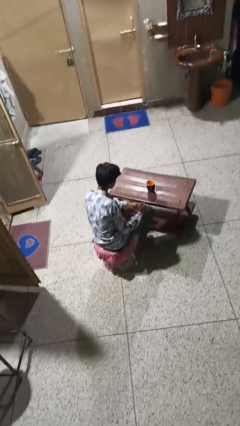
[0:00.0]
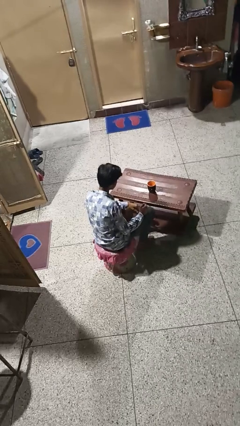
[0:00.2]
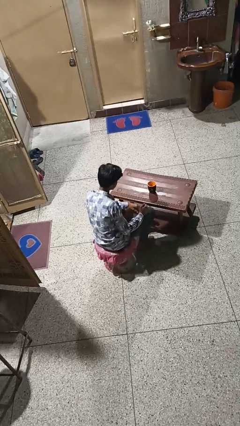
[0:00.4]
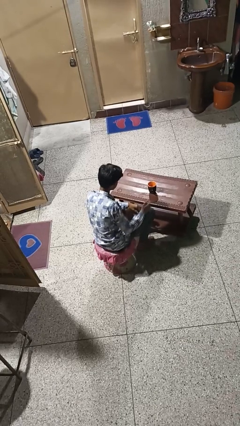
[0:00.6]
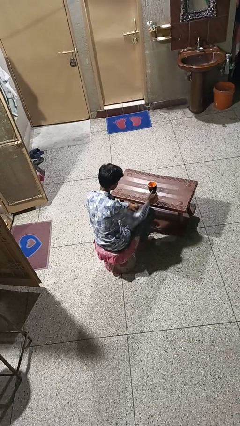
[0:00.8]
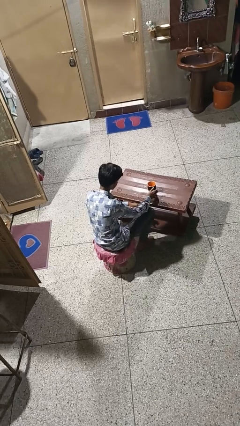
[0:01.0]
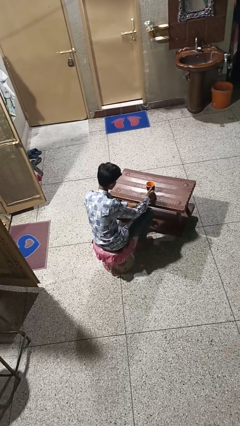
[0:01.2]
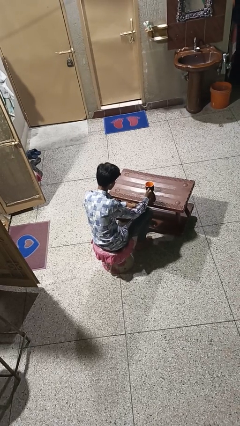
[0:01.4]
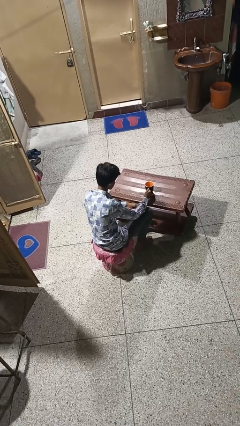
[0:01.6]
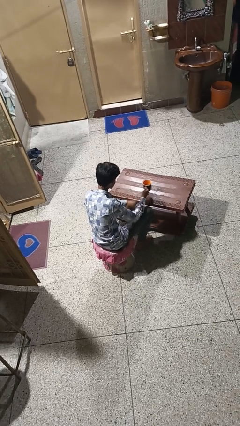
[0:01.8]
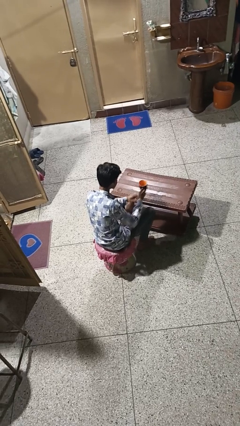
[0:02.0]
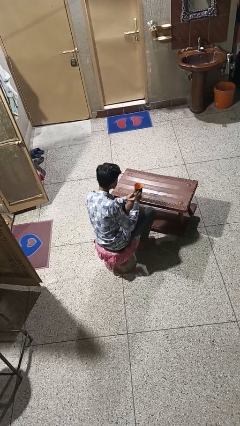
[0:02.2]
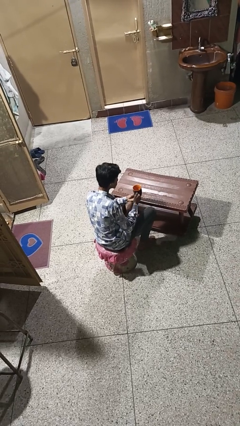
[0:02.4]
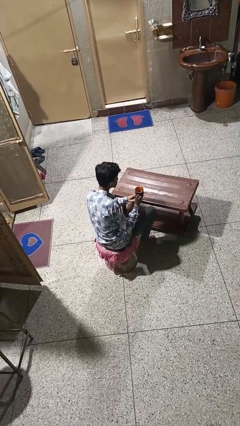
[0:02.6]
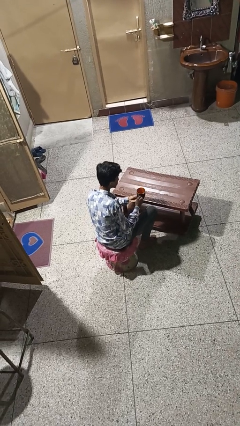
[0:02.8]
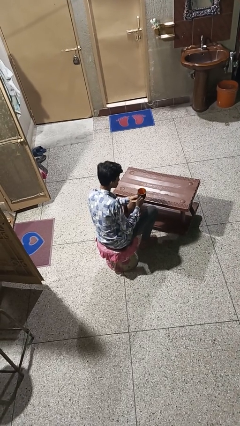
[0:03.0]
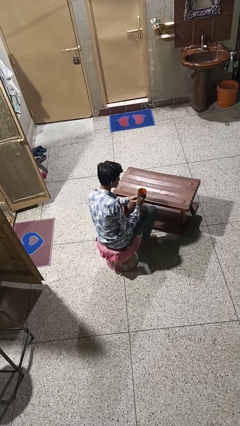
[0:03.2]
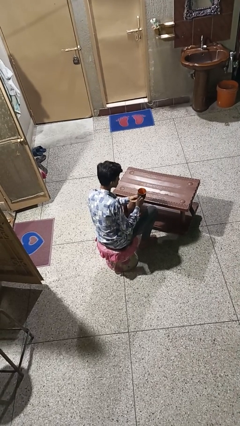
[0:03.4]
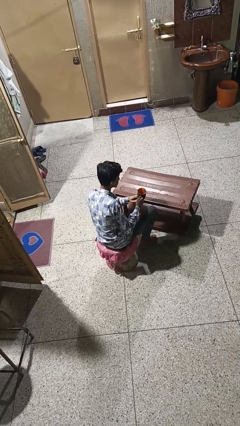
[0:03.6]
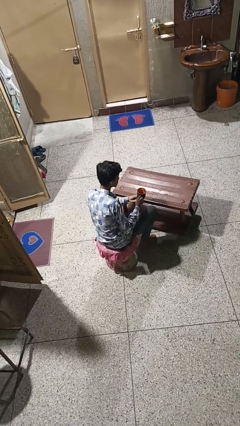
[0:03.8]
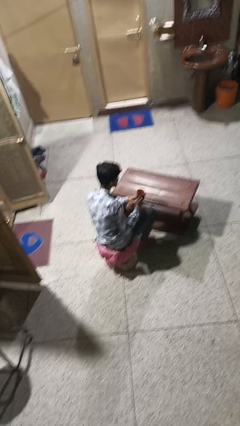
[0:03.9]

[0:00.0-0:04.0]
person picks up object from table

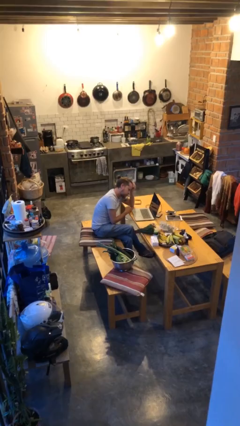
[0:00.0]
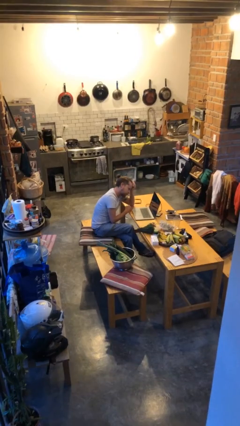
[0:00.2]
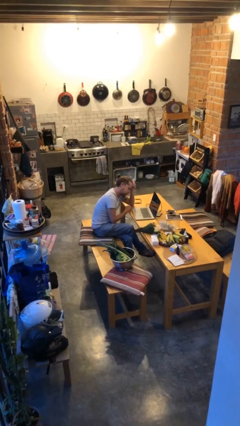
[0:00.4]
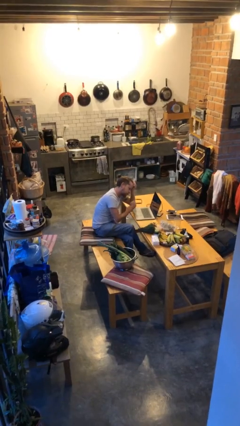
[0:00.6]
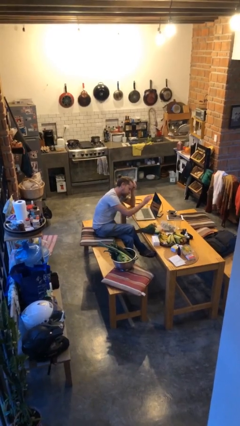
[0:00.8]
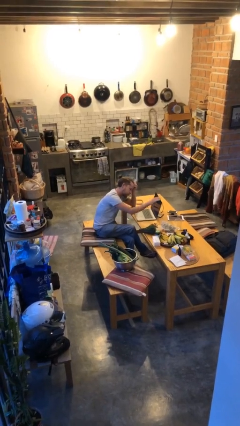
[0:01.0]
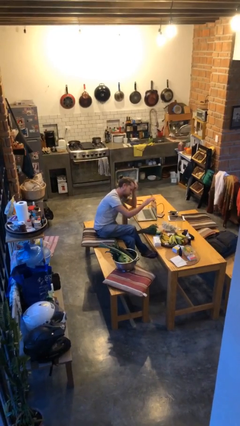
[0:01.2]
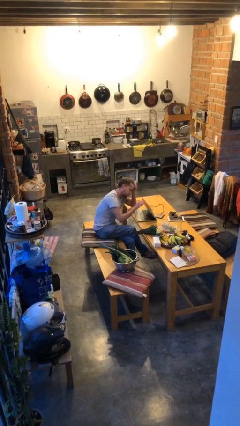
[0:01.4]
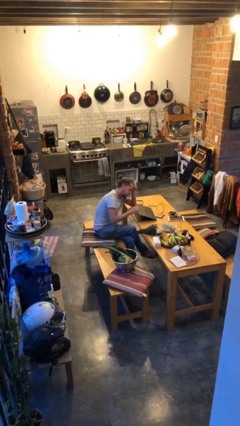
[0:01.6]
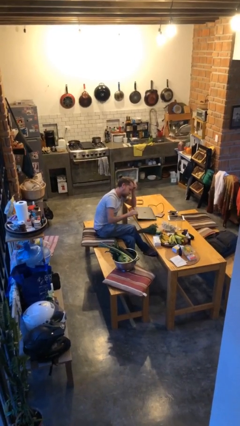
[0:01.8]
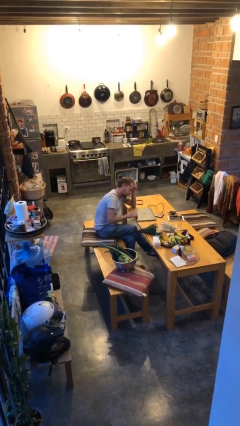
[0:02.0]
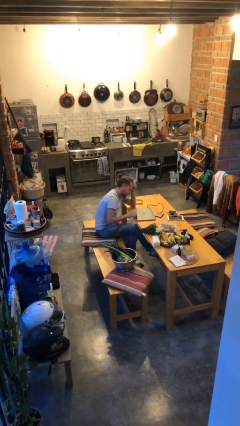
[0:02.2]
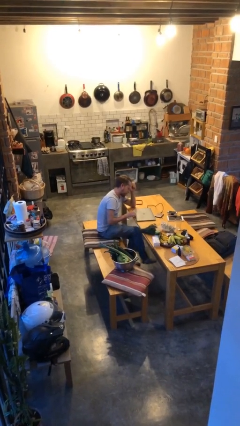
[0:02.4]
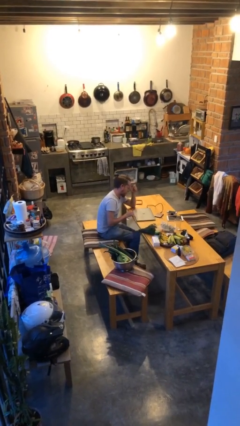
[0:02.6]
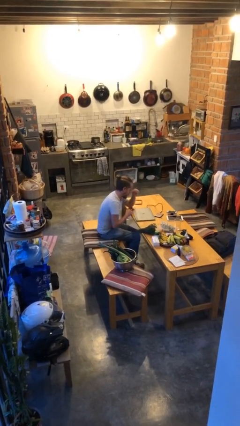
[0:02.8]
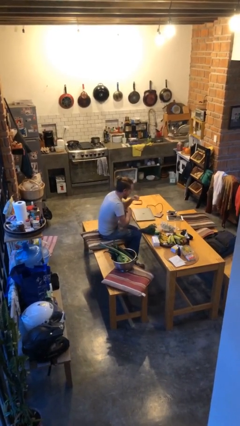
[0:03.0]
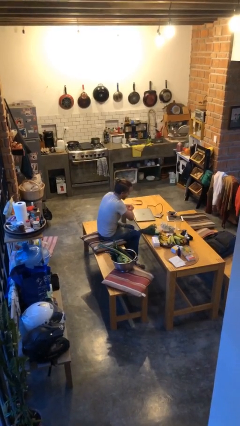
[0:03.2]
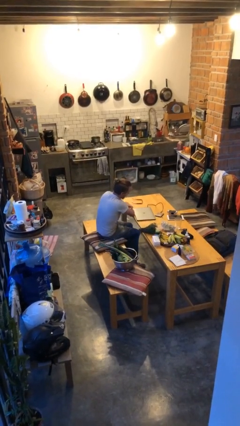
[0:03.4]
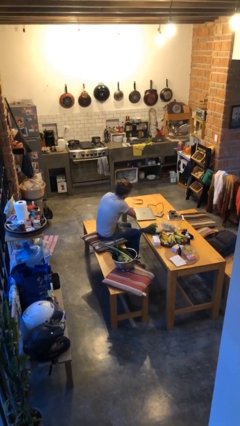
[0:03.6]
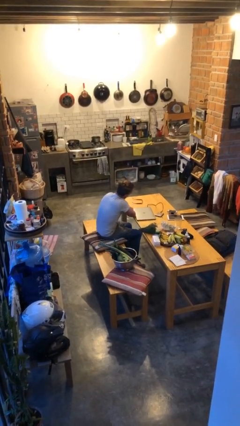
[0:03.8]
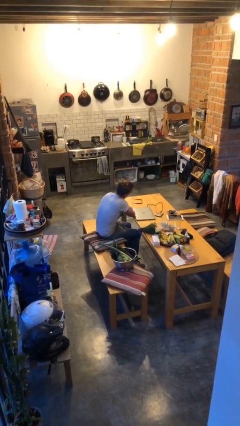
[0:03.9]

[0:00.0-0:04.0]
person closes laptop

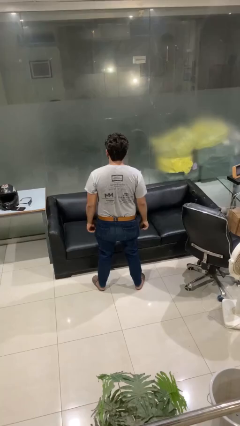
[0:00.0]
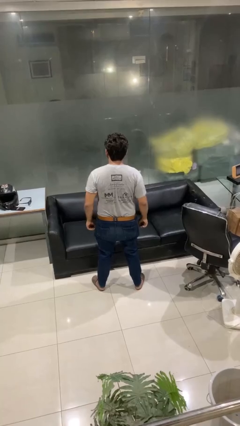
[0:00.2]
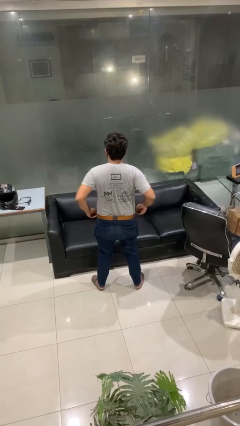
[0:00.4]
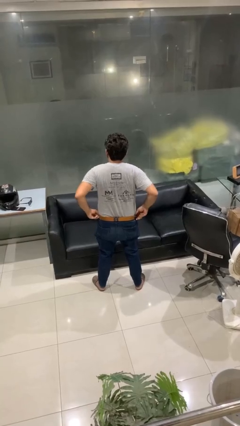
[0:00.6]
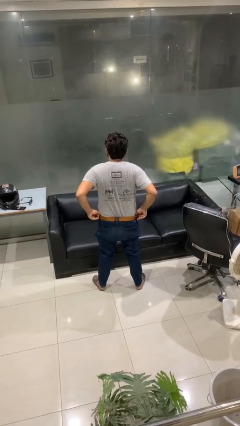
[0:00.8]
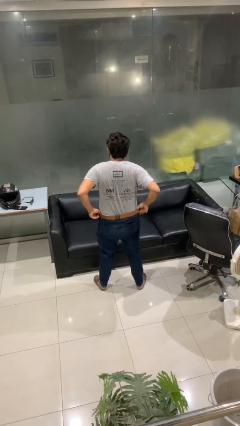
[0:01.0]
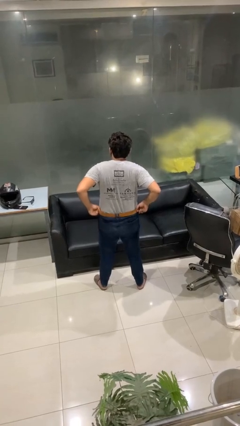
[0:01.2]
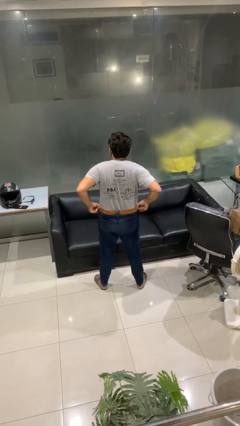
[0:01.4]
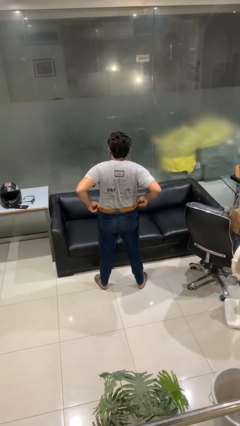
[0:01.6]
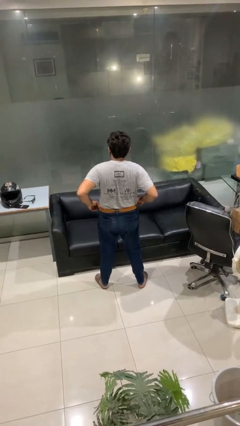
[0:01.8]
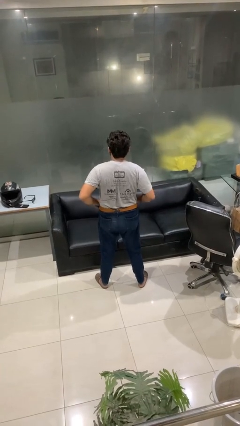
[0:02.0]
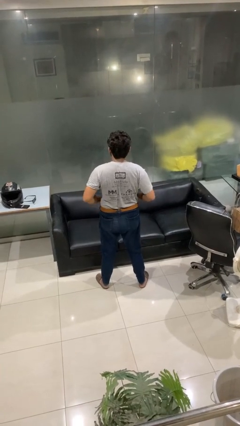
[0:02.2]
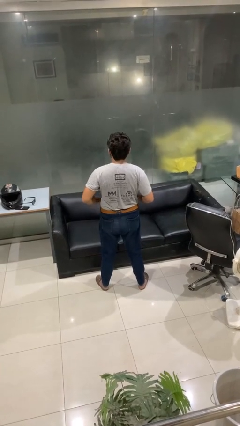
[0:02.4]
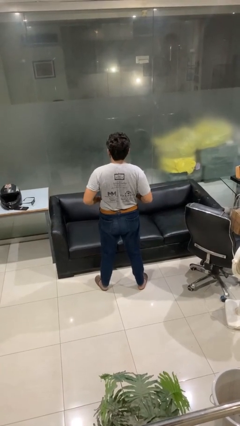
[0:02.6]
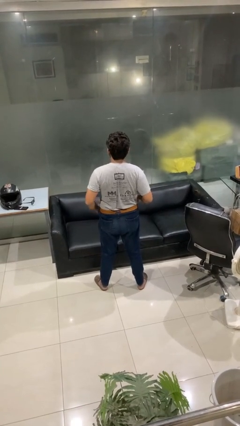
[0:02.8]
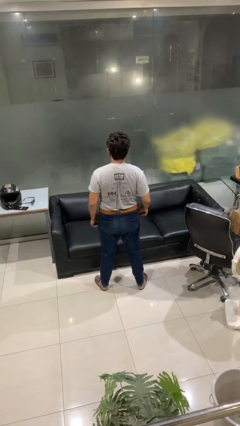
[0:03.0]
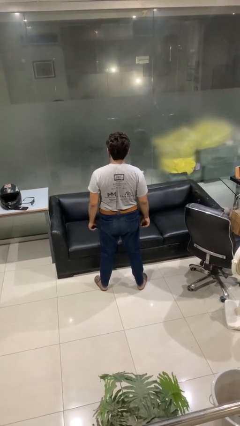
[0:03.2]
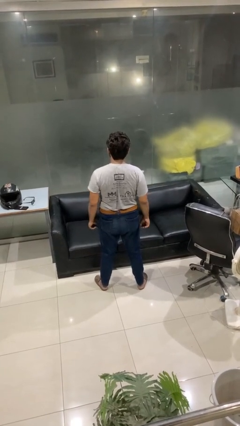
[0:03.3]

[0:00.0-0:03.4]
person hikes up pants

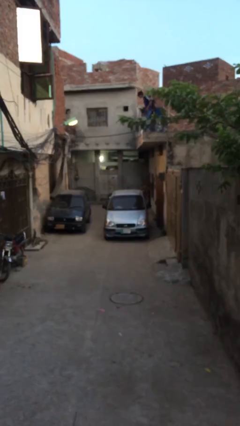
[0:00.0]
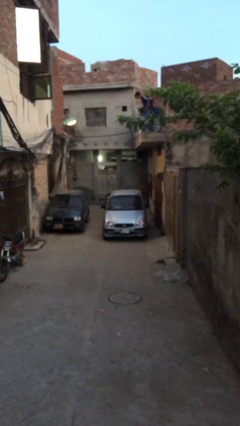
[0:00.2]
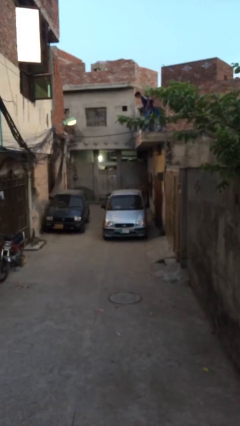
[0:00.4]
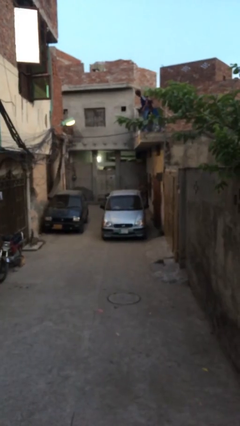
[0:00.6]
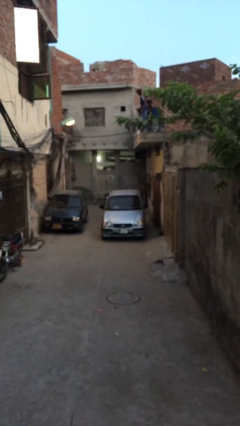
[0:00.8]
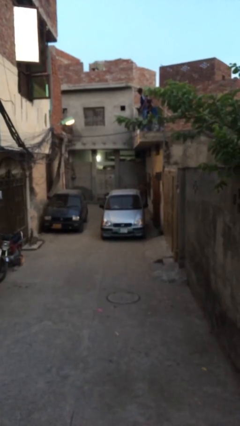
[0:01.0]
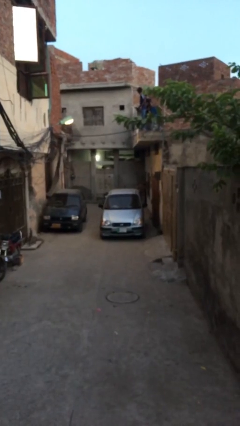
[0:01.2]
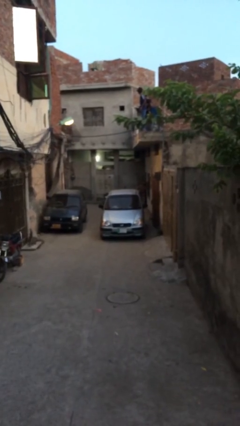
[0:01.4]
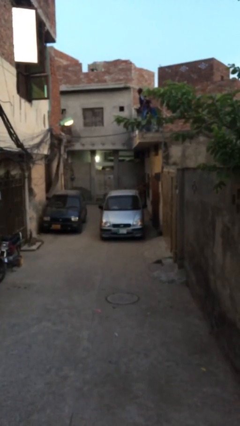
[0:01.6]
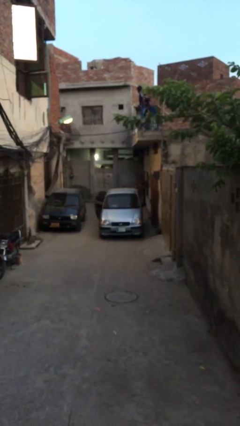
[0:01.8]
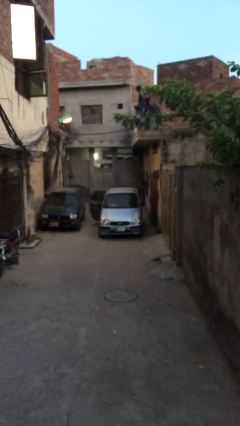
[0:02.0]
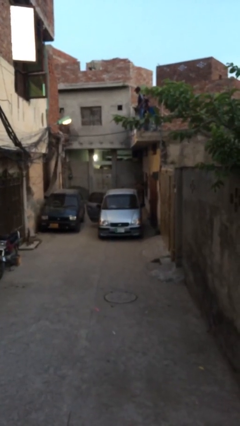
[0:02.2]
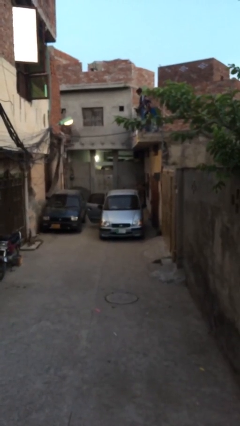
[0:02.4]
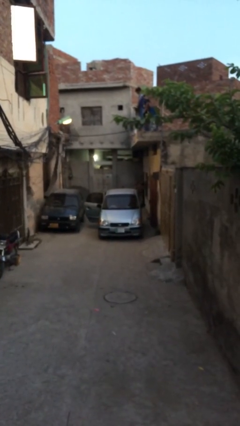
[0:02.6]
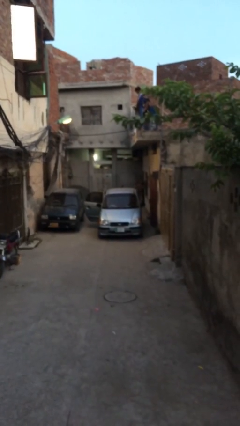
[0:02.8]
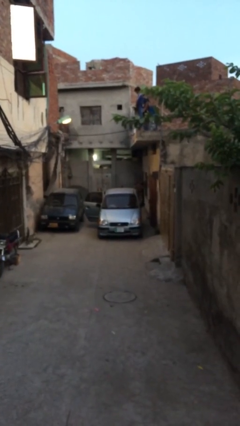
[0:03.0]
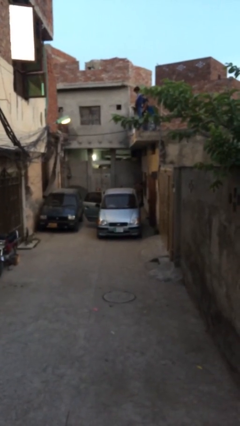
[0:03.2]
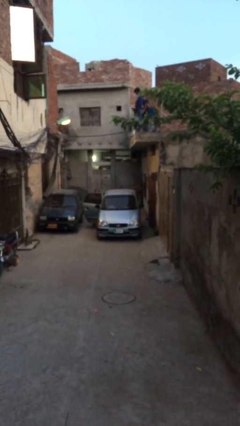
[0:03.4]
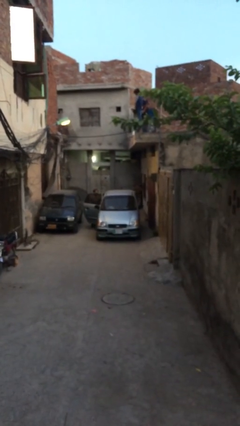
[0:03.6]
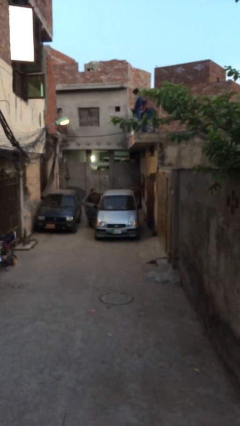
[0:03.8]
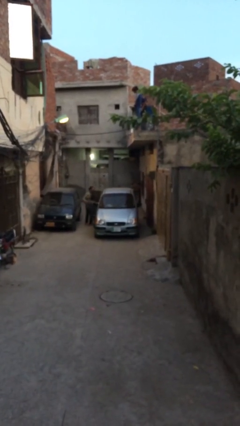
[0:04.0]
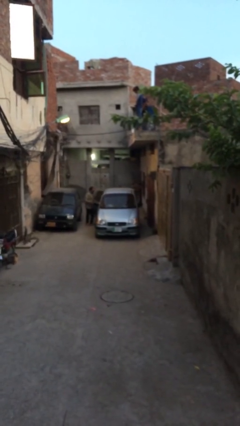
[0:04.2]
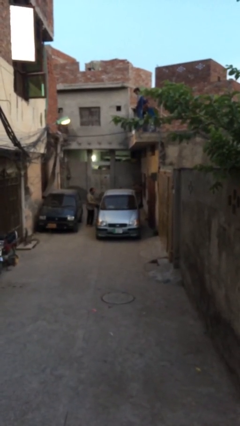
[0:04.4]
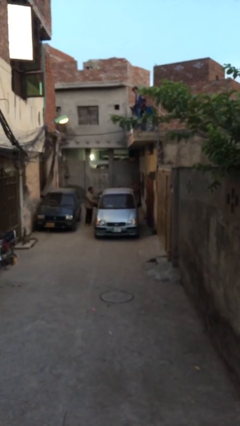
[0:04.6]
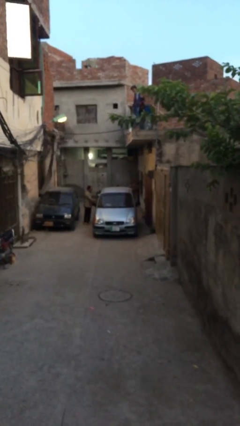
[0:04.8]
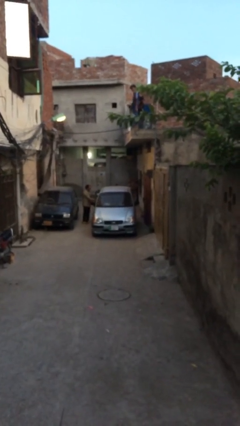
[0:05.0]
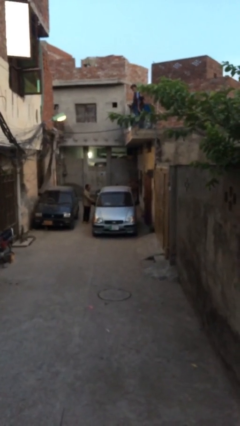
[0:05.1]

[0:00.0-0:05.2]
car drops off person

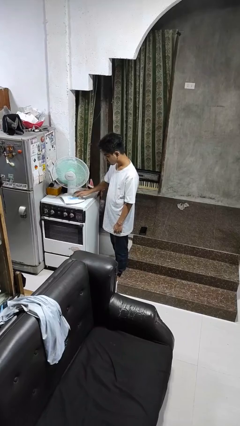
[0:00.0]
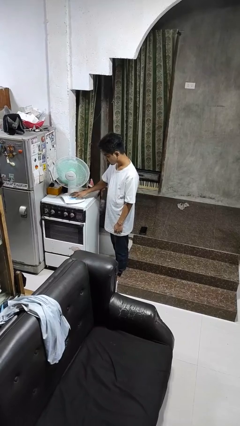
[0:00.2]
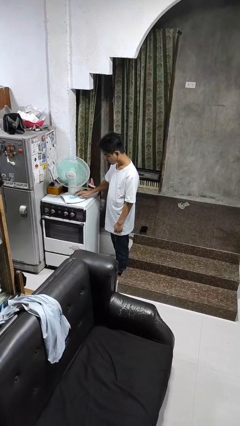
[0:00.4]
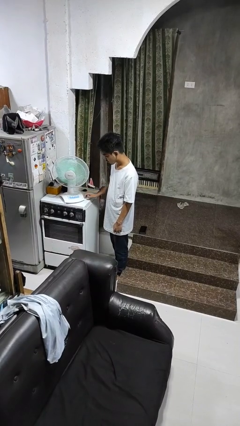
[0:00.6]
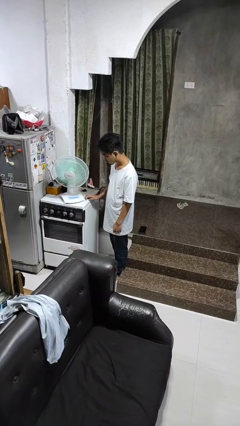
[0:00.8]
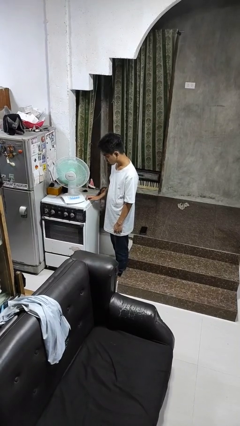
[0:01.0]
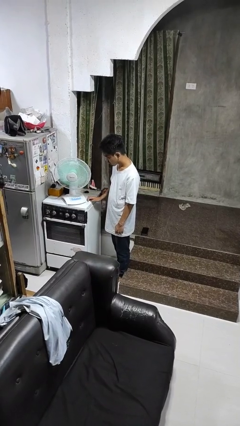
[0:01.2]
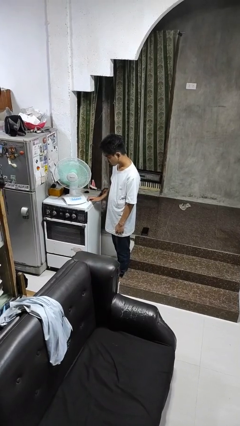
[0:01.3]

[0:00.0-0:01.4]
person turns off fan
